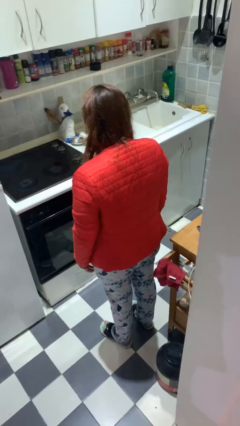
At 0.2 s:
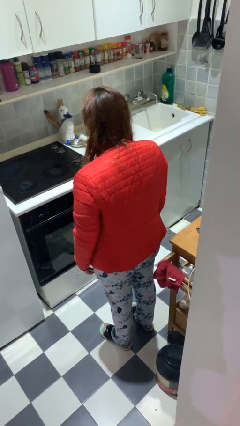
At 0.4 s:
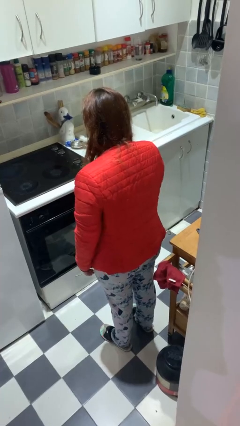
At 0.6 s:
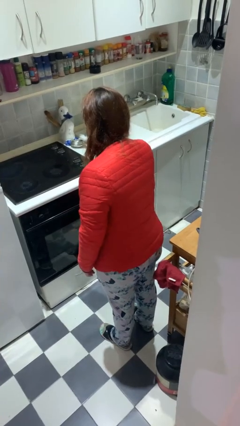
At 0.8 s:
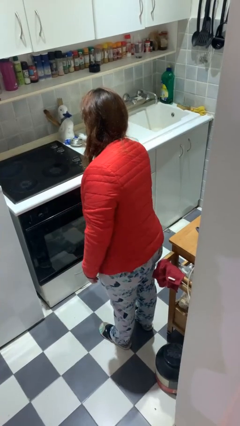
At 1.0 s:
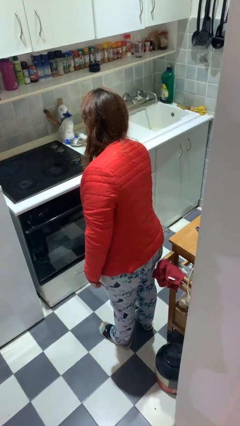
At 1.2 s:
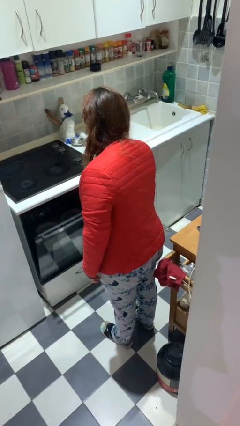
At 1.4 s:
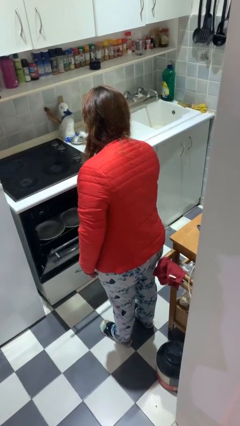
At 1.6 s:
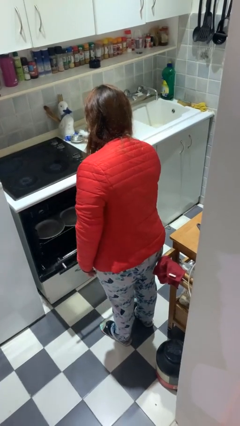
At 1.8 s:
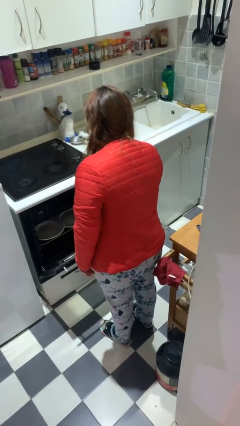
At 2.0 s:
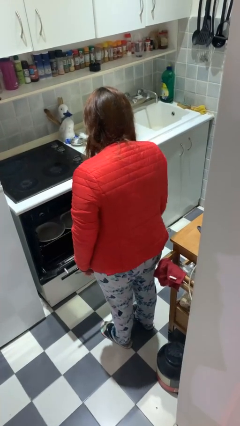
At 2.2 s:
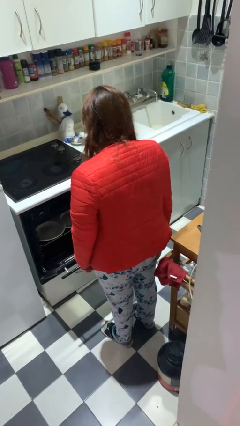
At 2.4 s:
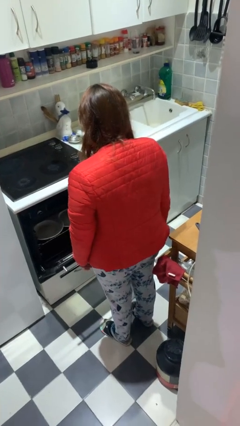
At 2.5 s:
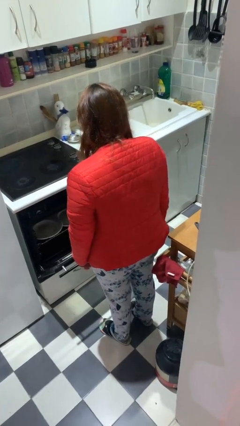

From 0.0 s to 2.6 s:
person opens dishwasher

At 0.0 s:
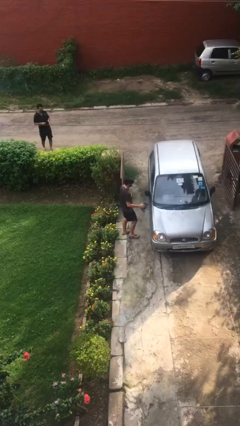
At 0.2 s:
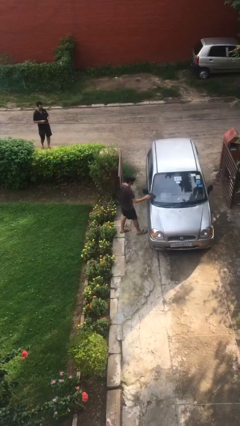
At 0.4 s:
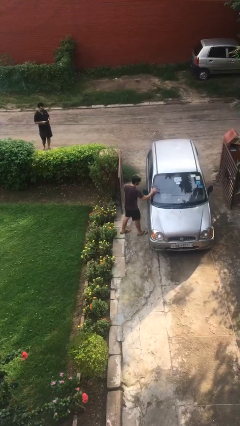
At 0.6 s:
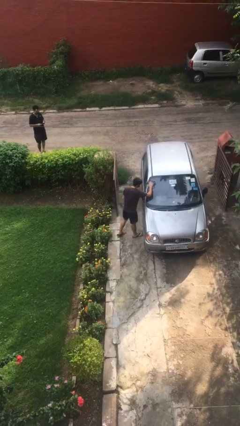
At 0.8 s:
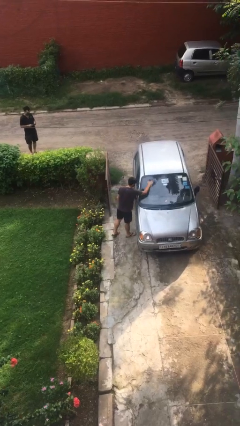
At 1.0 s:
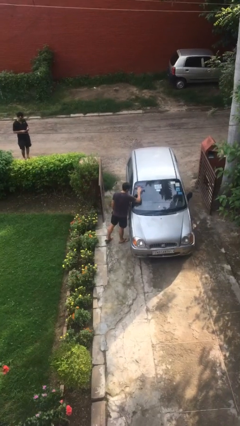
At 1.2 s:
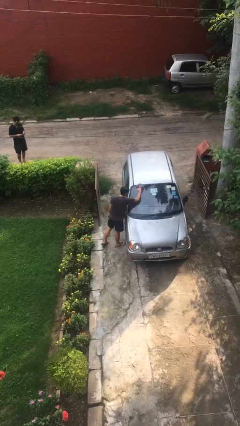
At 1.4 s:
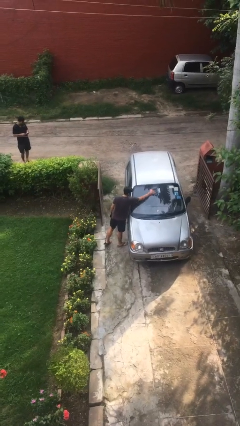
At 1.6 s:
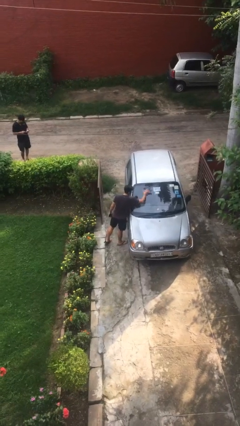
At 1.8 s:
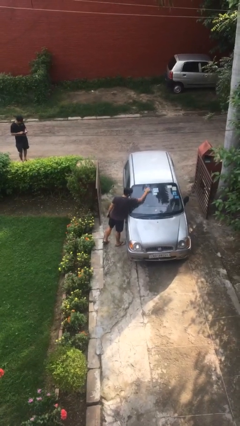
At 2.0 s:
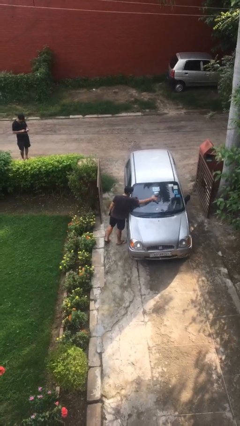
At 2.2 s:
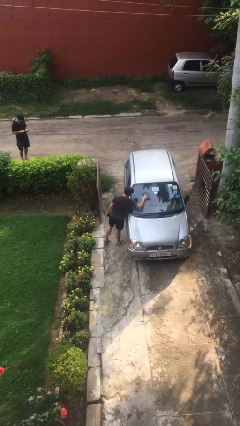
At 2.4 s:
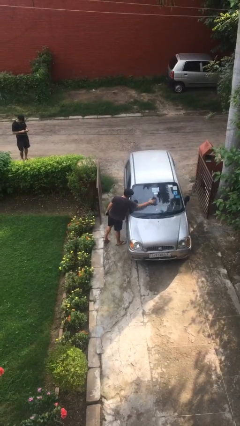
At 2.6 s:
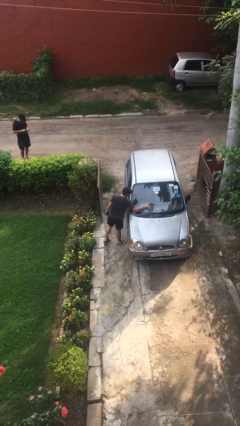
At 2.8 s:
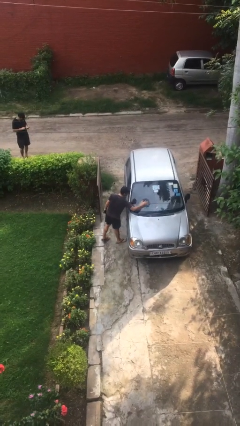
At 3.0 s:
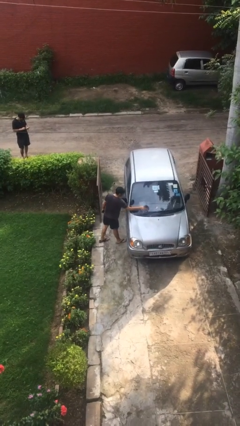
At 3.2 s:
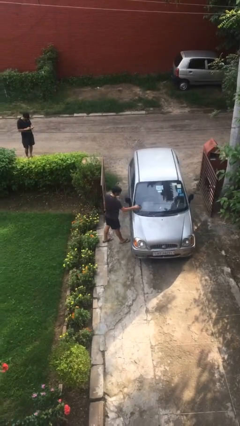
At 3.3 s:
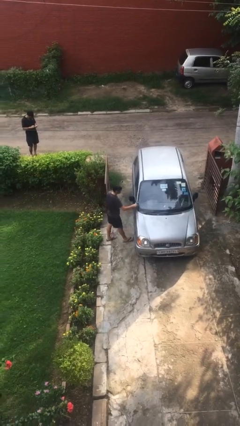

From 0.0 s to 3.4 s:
person polishes car with rag

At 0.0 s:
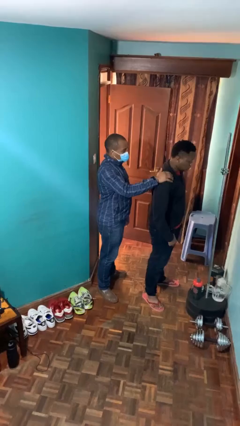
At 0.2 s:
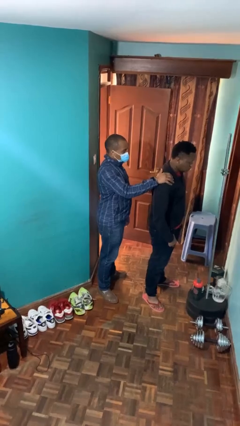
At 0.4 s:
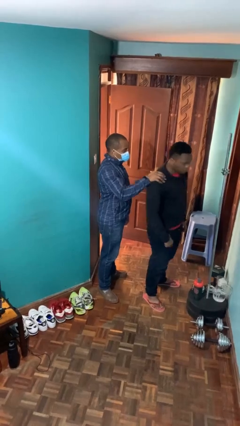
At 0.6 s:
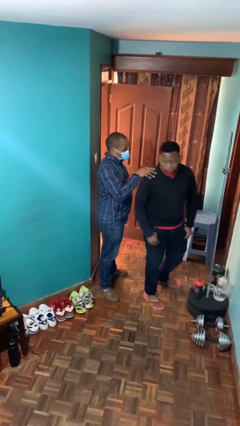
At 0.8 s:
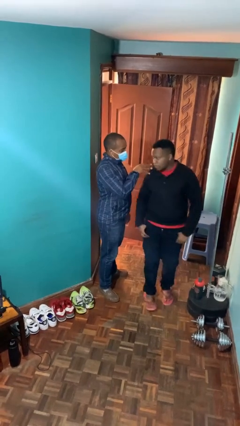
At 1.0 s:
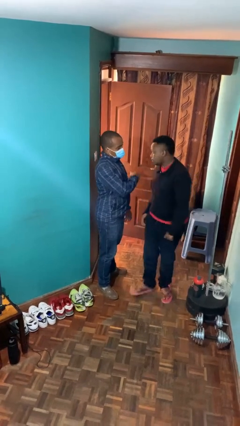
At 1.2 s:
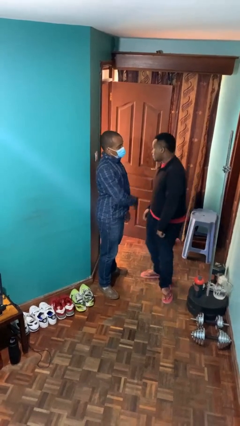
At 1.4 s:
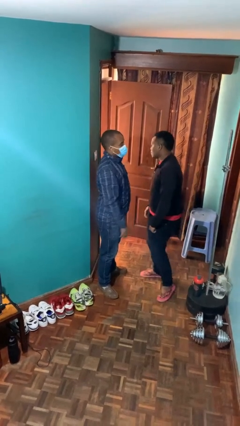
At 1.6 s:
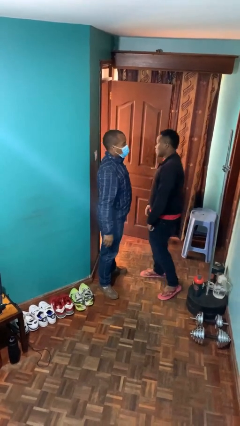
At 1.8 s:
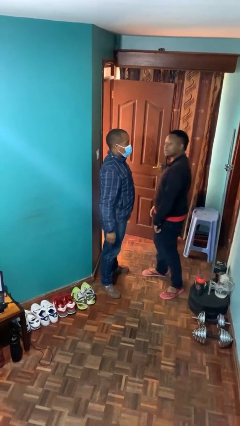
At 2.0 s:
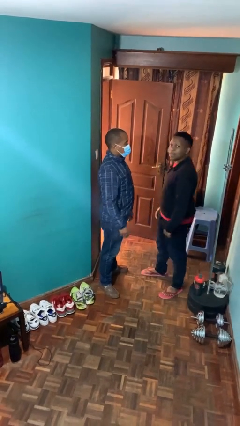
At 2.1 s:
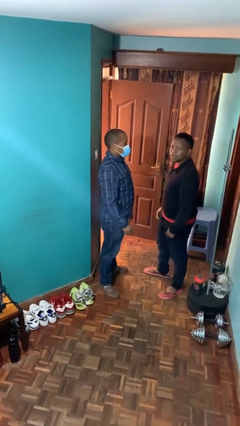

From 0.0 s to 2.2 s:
person spins person around

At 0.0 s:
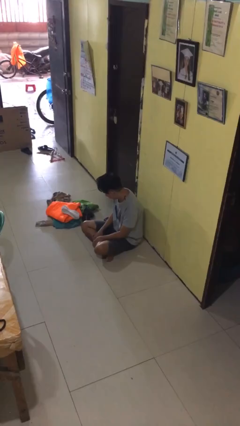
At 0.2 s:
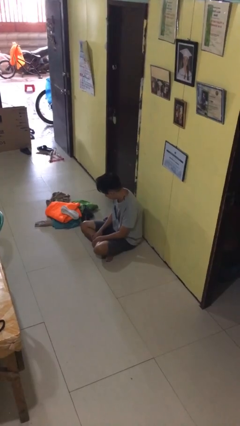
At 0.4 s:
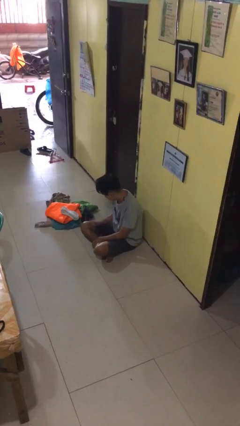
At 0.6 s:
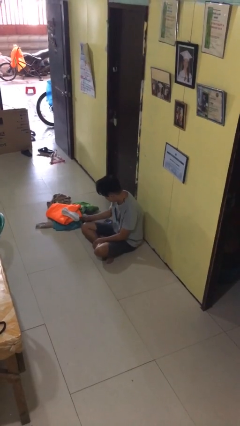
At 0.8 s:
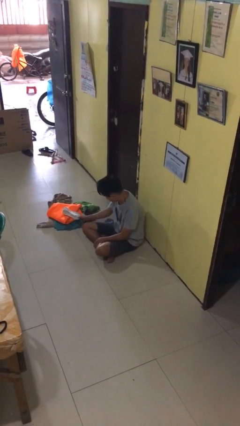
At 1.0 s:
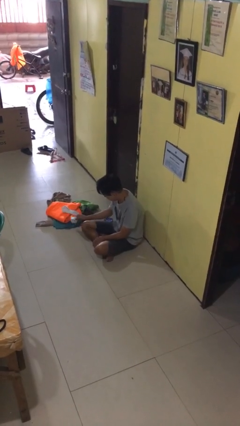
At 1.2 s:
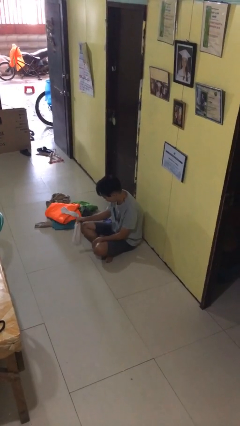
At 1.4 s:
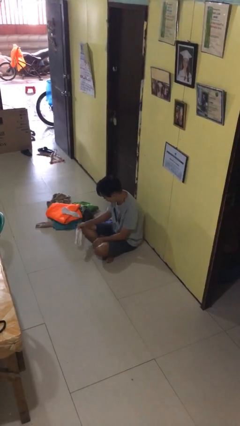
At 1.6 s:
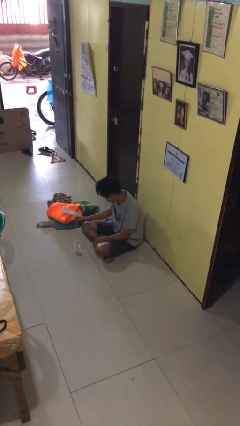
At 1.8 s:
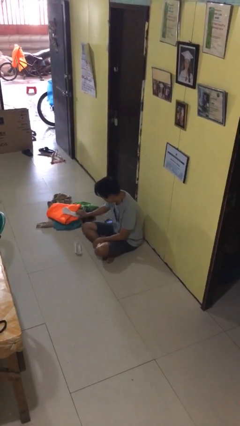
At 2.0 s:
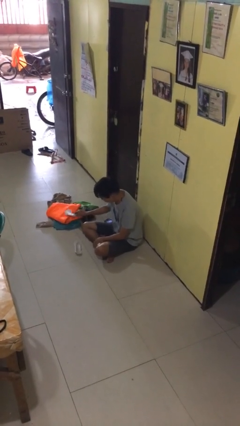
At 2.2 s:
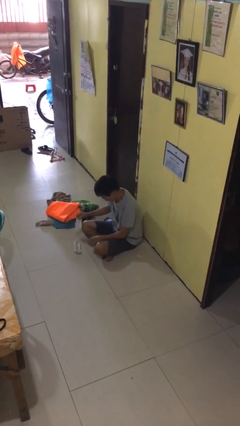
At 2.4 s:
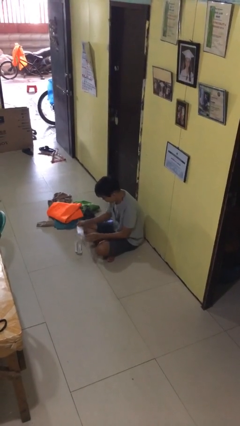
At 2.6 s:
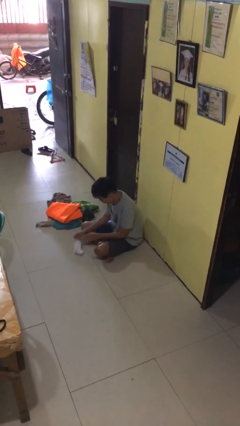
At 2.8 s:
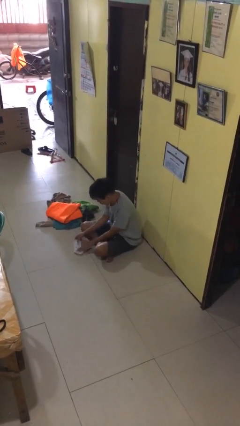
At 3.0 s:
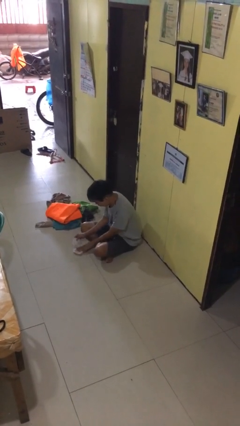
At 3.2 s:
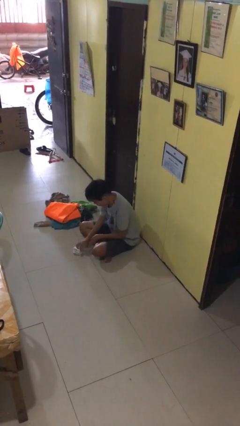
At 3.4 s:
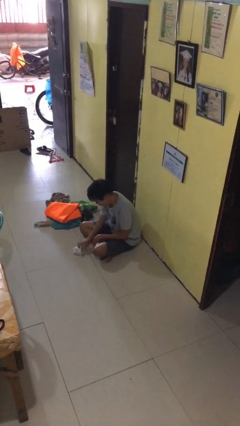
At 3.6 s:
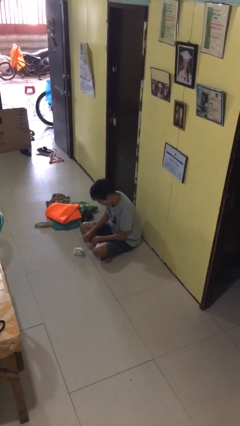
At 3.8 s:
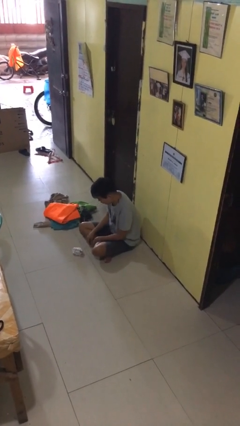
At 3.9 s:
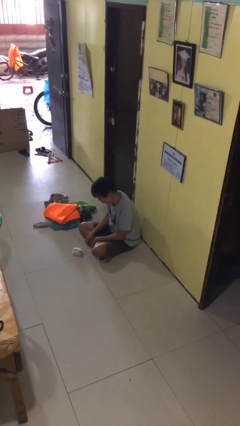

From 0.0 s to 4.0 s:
person folds socks

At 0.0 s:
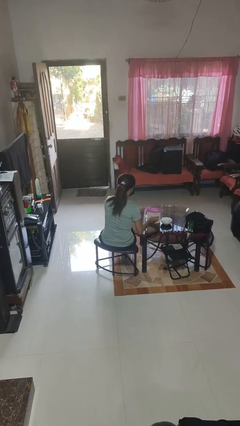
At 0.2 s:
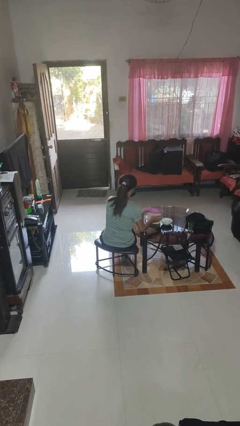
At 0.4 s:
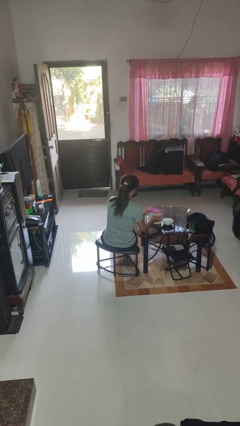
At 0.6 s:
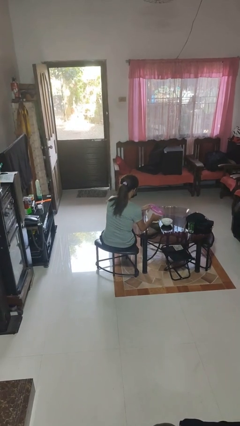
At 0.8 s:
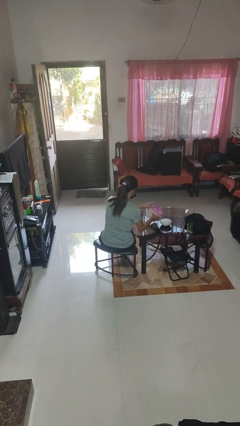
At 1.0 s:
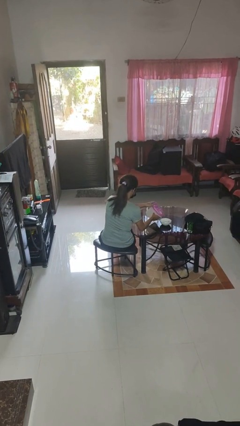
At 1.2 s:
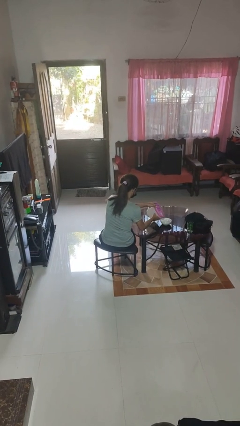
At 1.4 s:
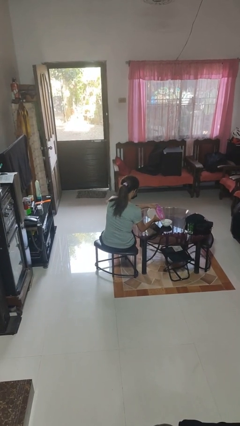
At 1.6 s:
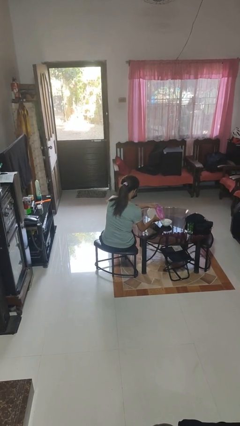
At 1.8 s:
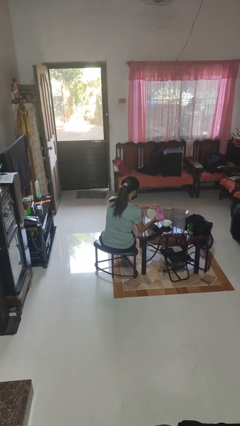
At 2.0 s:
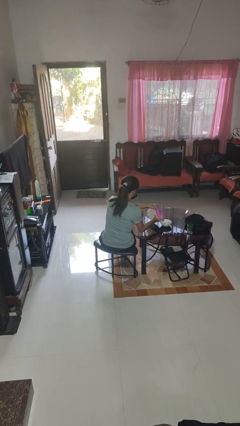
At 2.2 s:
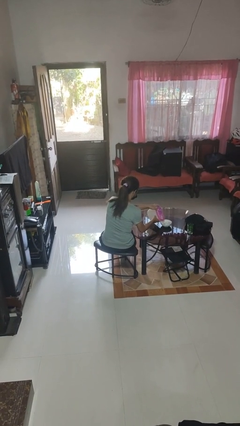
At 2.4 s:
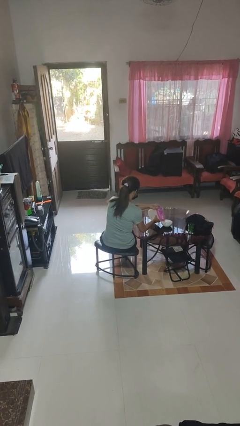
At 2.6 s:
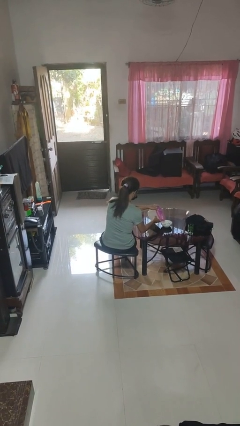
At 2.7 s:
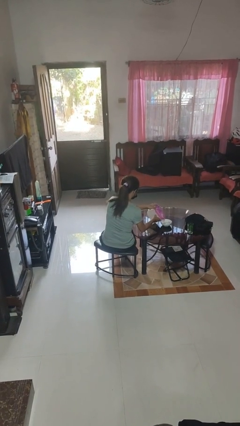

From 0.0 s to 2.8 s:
person pours into bowl

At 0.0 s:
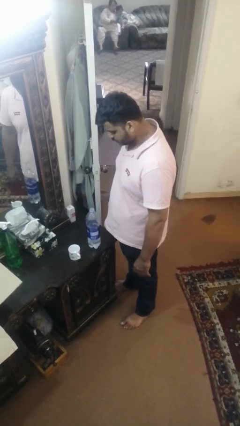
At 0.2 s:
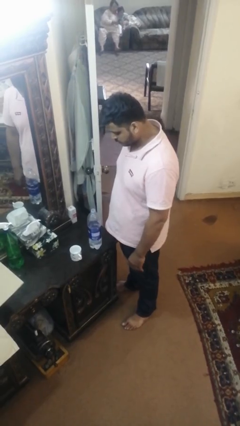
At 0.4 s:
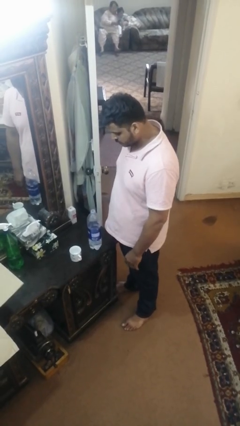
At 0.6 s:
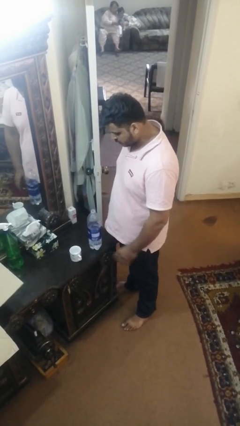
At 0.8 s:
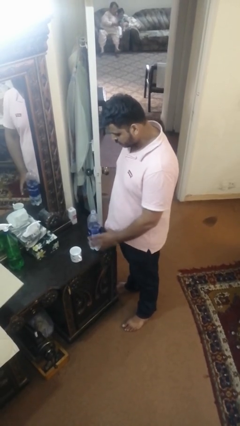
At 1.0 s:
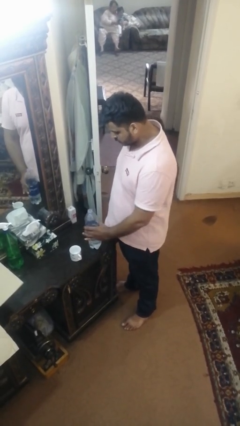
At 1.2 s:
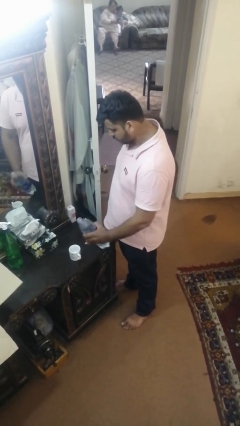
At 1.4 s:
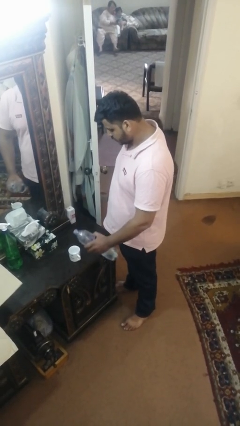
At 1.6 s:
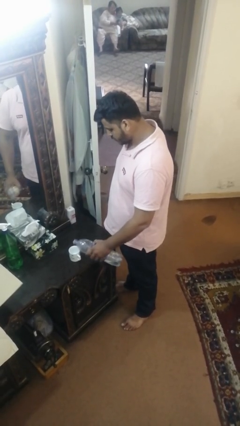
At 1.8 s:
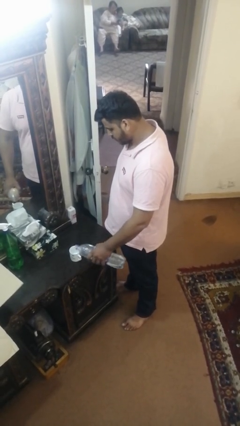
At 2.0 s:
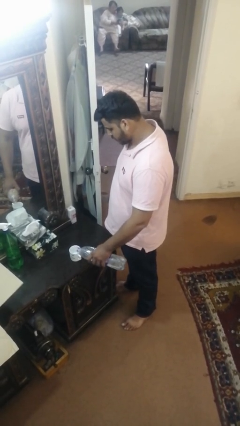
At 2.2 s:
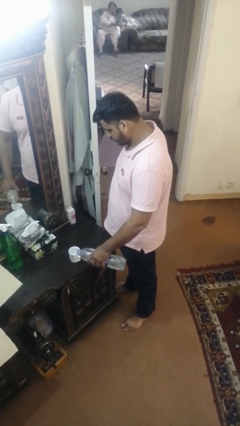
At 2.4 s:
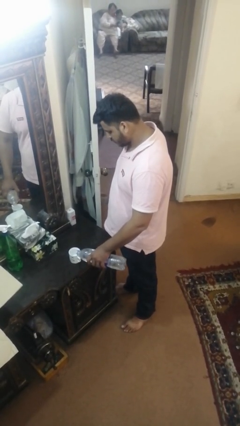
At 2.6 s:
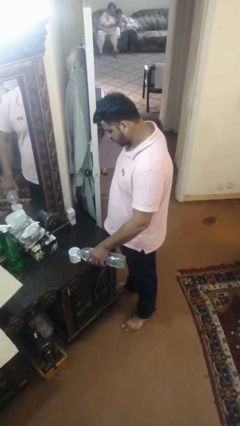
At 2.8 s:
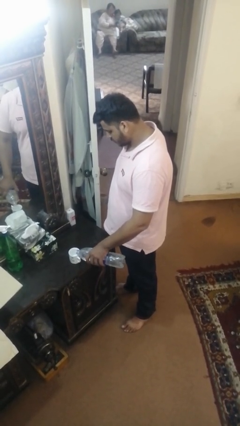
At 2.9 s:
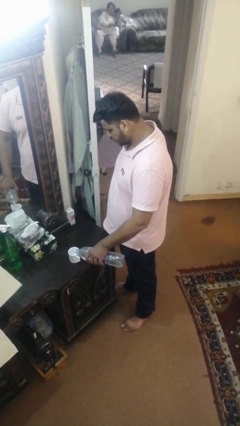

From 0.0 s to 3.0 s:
person pours liquid into cup
